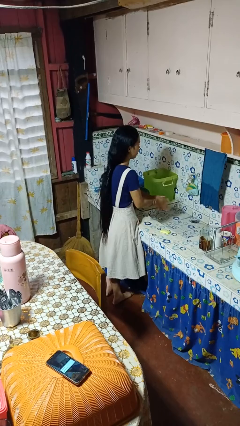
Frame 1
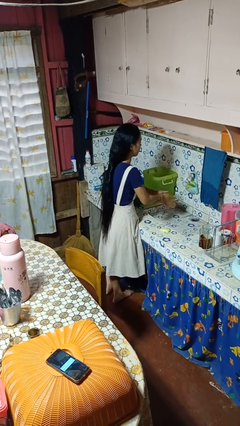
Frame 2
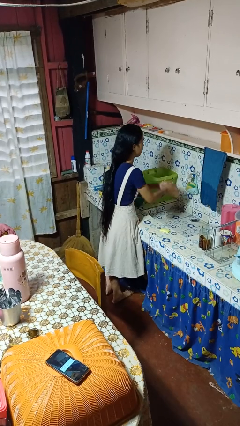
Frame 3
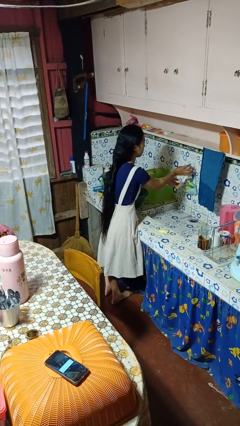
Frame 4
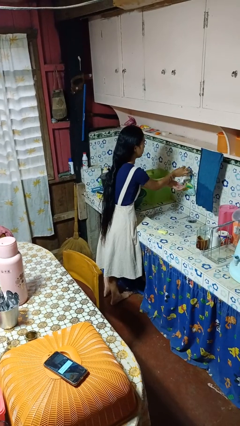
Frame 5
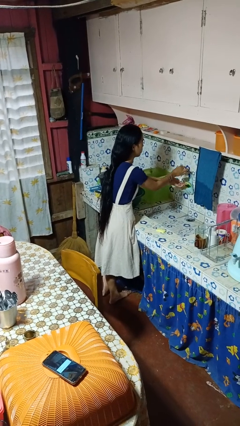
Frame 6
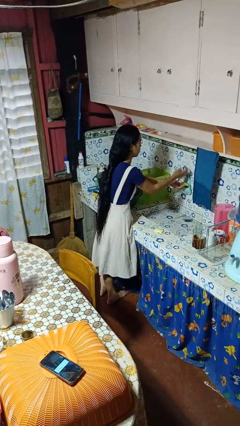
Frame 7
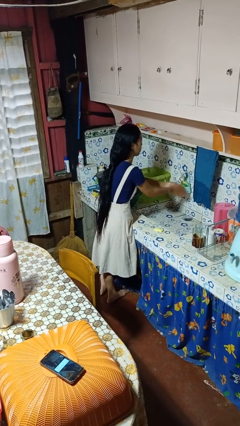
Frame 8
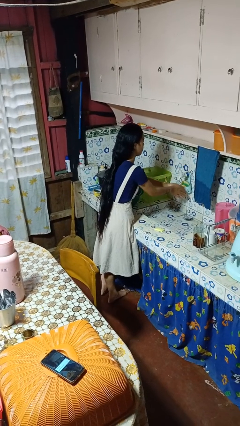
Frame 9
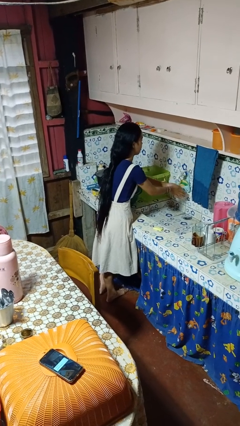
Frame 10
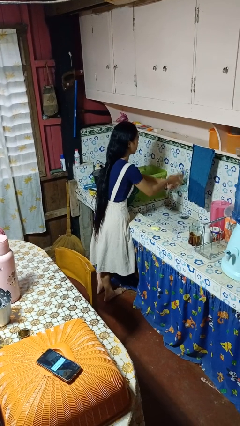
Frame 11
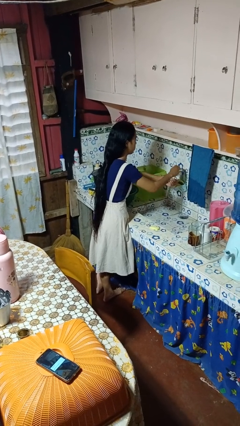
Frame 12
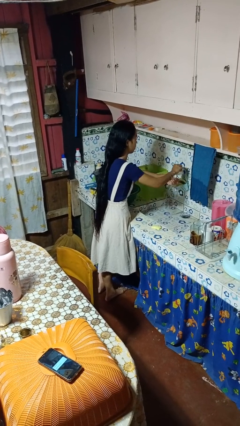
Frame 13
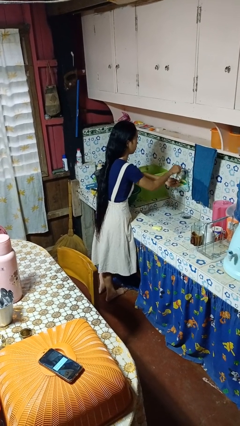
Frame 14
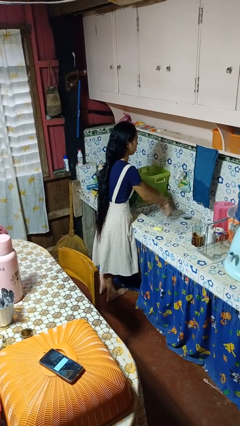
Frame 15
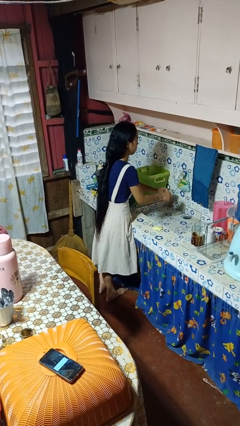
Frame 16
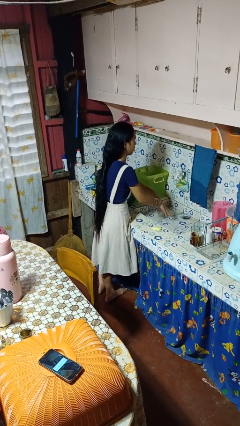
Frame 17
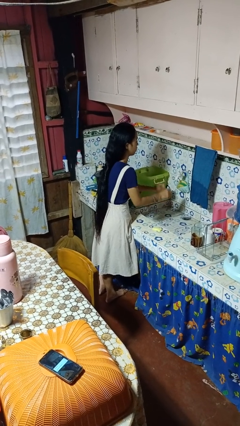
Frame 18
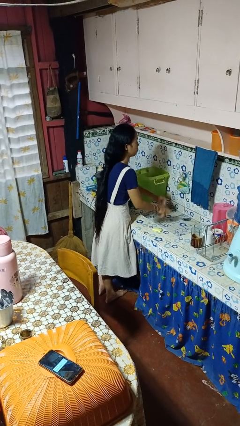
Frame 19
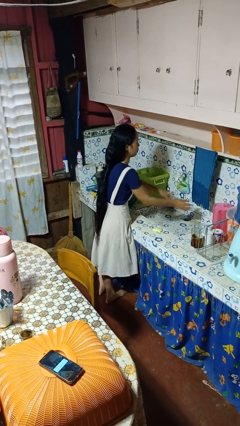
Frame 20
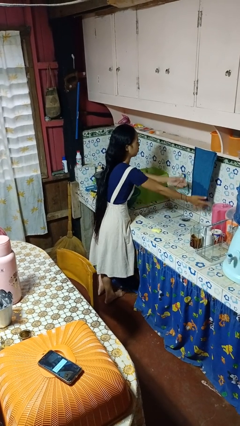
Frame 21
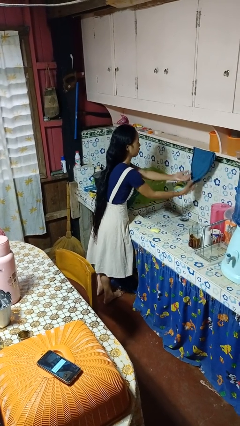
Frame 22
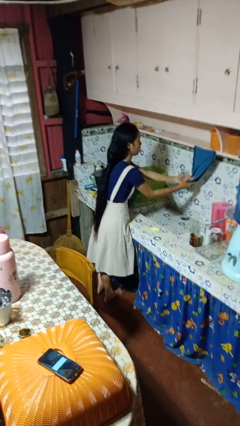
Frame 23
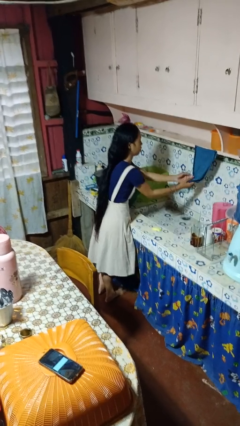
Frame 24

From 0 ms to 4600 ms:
person washes hands

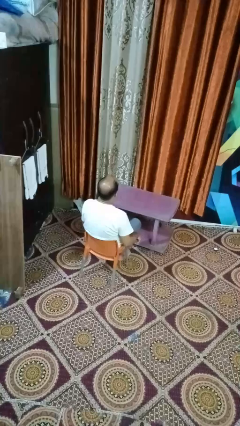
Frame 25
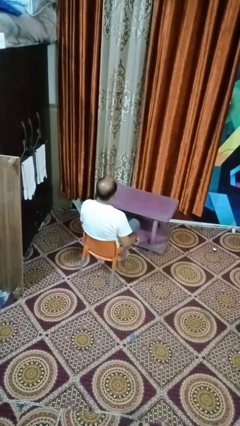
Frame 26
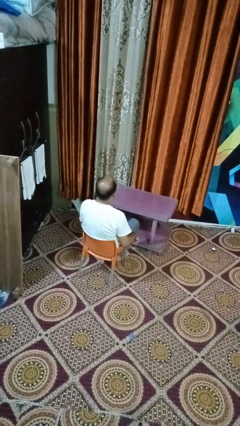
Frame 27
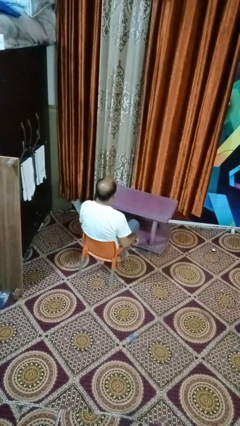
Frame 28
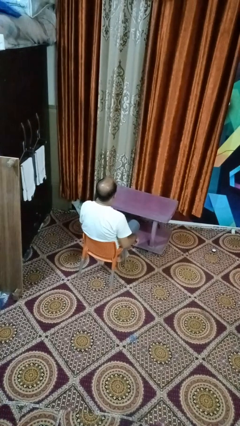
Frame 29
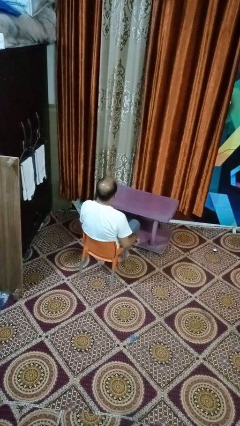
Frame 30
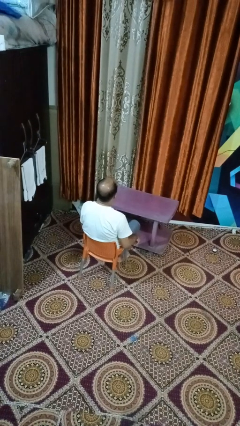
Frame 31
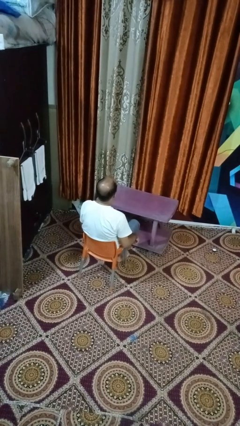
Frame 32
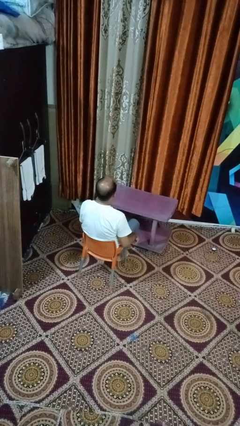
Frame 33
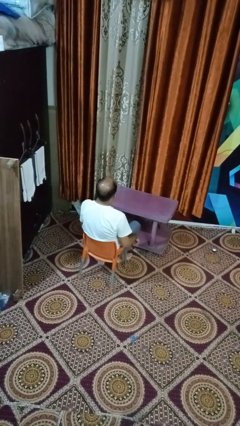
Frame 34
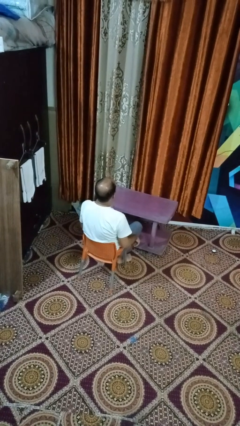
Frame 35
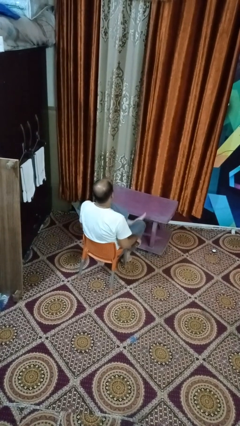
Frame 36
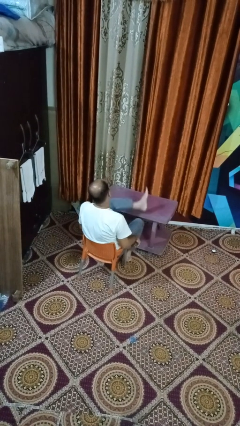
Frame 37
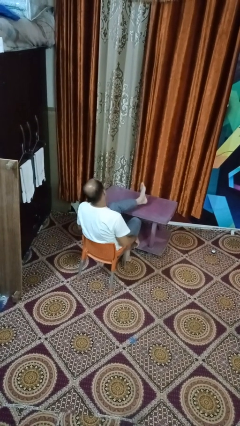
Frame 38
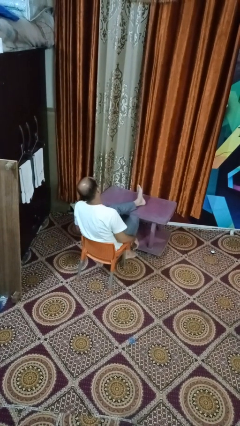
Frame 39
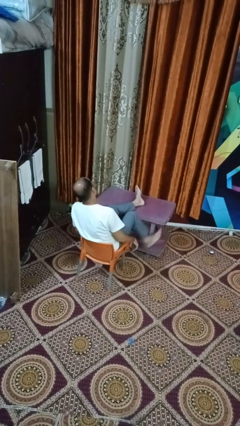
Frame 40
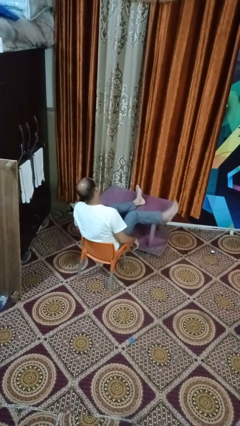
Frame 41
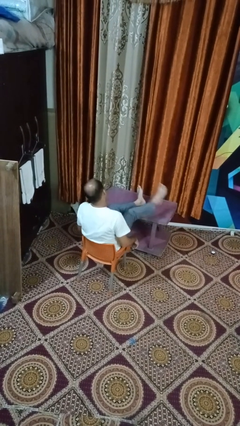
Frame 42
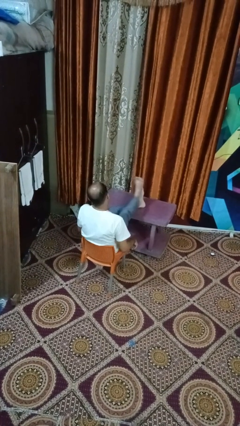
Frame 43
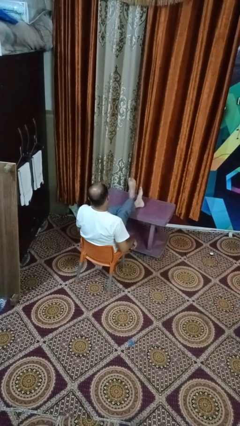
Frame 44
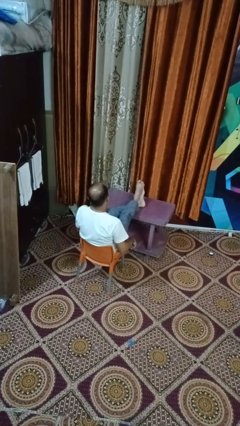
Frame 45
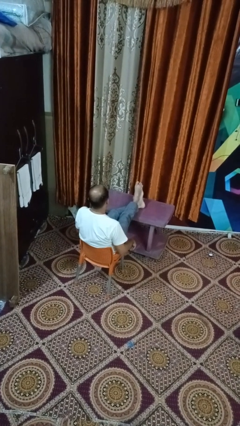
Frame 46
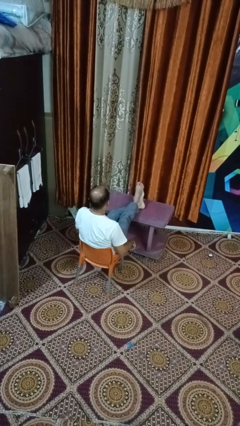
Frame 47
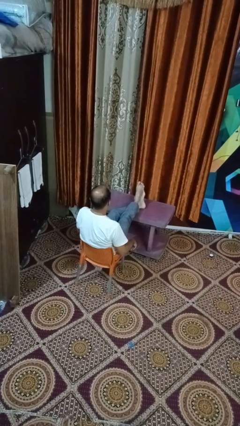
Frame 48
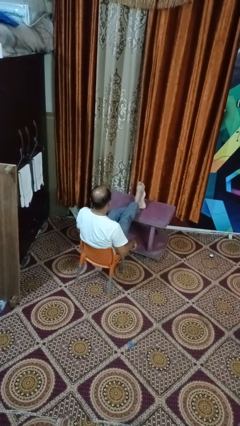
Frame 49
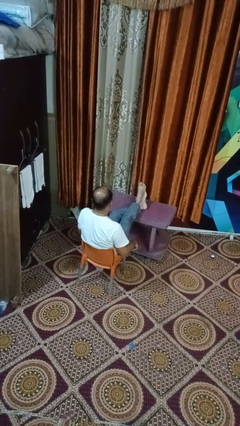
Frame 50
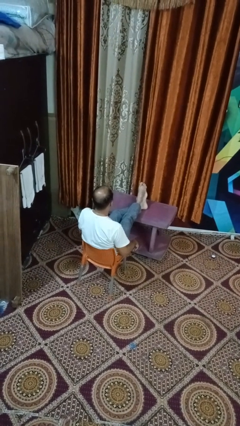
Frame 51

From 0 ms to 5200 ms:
person puts feet up

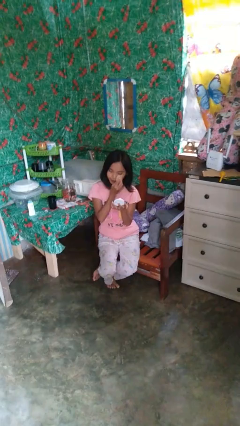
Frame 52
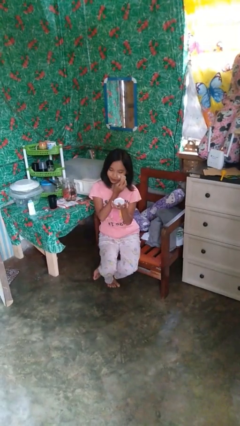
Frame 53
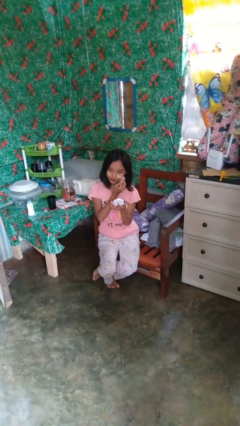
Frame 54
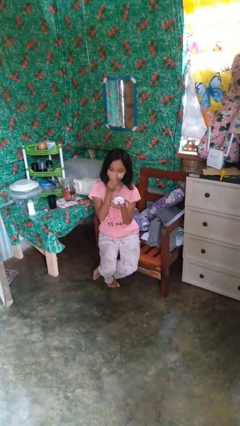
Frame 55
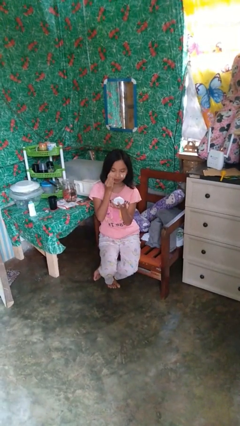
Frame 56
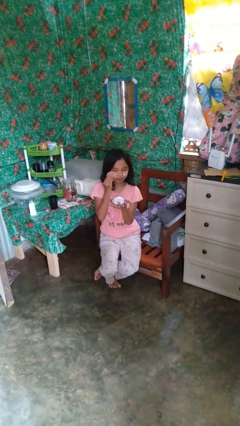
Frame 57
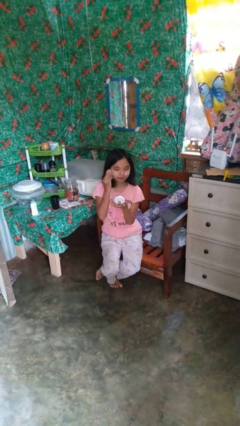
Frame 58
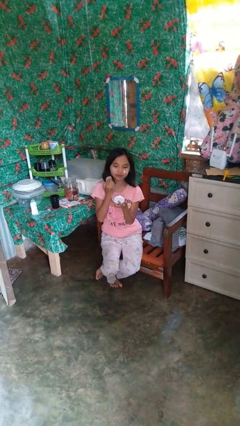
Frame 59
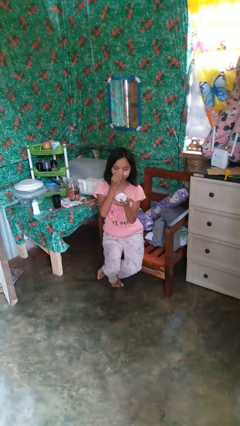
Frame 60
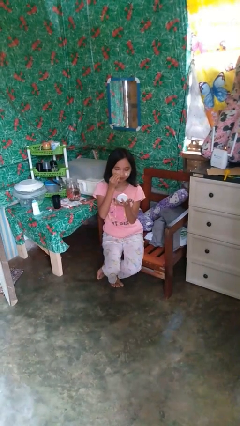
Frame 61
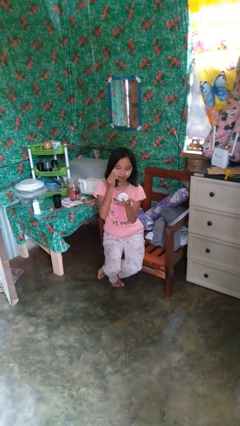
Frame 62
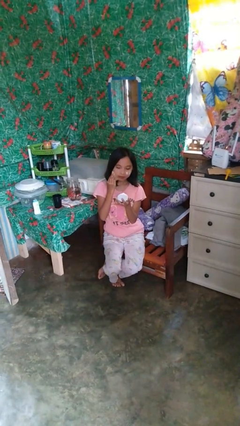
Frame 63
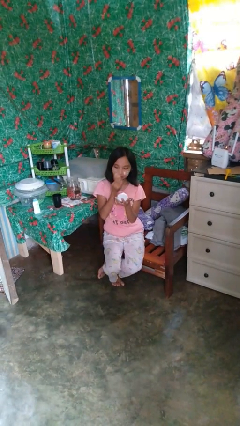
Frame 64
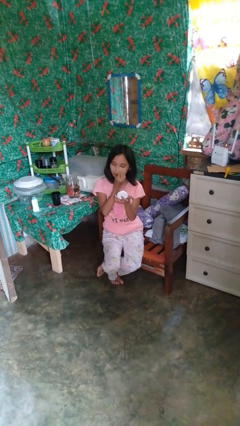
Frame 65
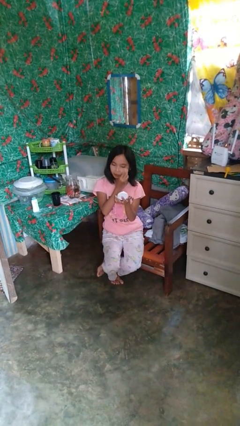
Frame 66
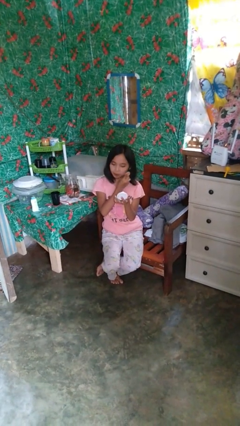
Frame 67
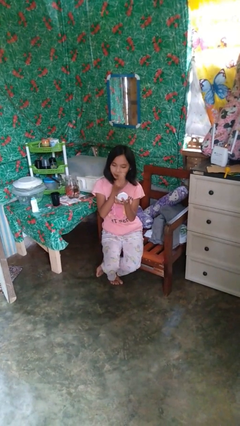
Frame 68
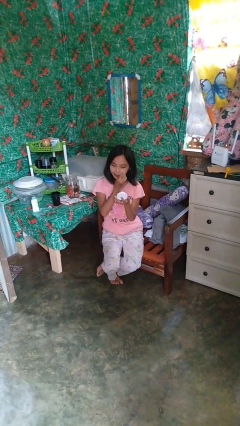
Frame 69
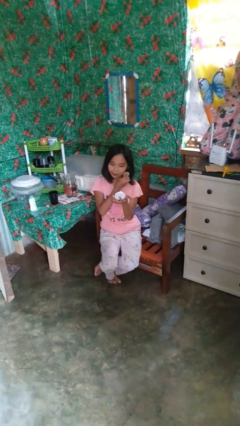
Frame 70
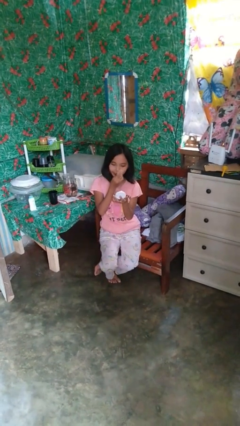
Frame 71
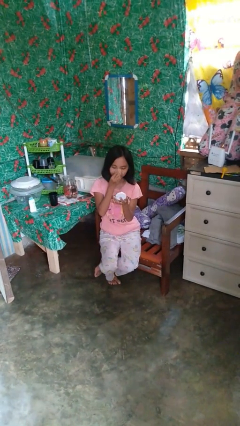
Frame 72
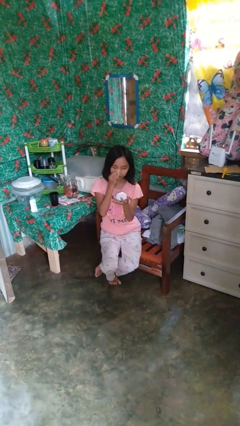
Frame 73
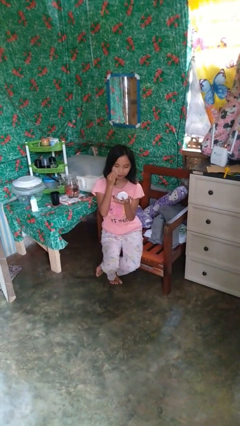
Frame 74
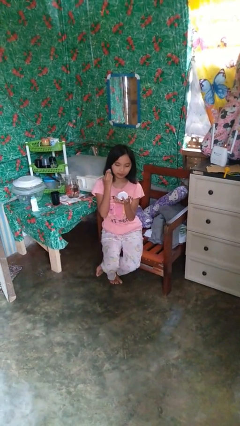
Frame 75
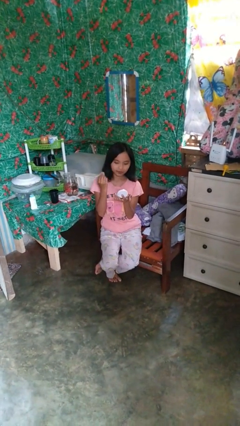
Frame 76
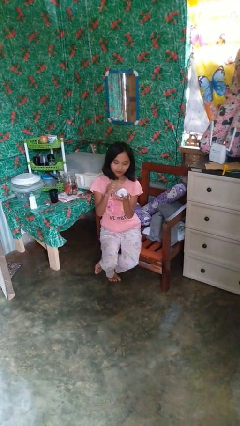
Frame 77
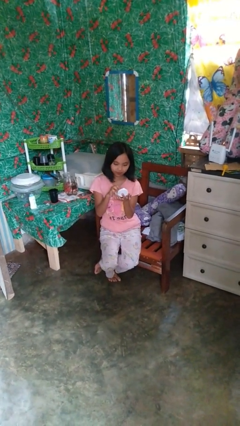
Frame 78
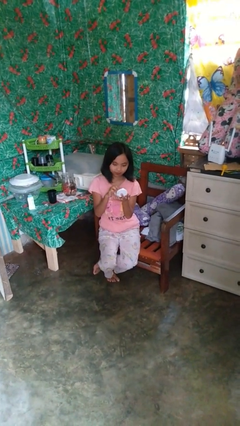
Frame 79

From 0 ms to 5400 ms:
person applies foundation makeup

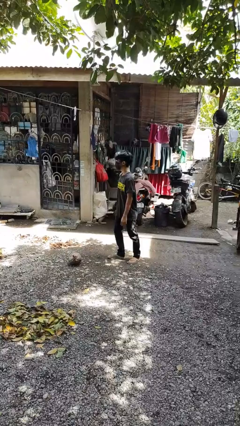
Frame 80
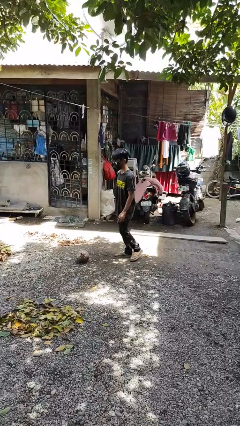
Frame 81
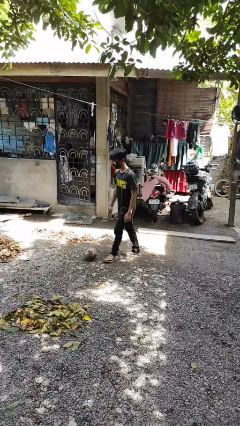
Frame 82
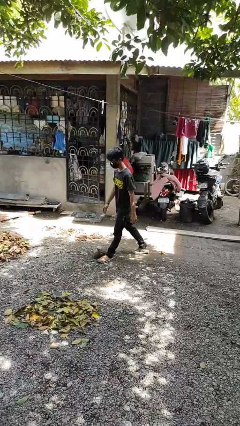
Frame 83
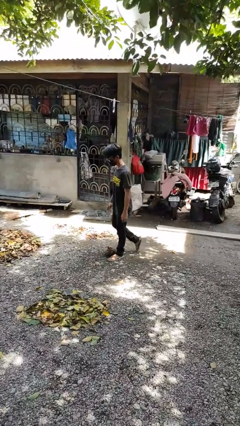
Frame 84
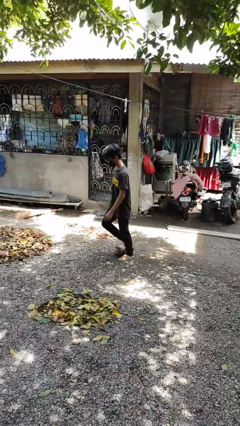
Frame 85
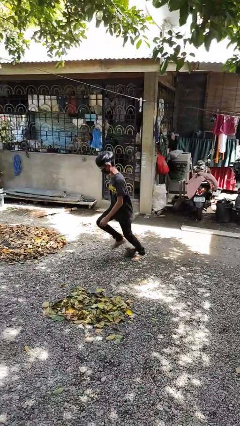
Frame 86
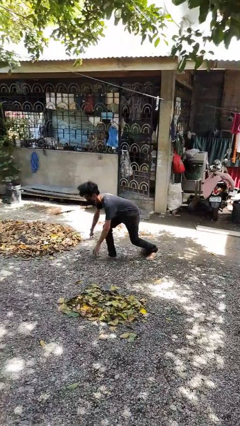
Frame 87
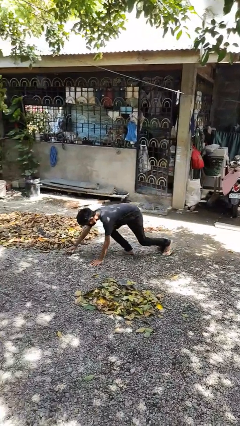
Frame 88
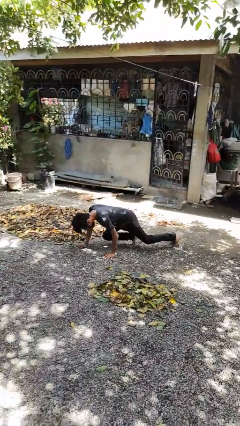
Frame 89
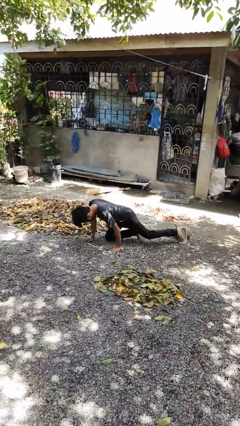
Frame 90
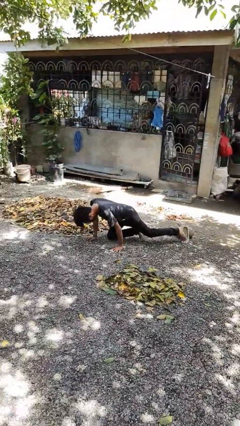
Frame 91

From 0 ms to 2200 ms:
person trips on object on floor

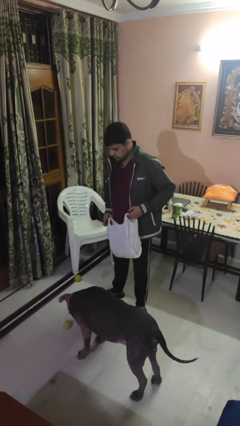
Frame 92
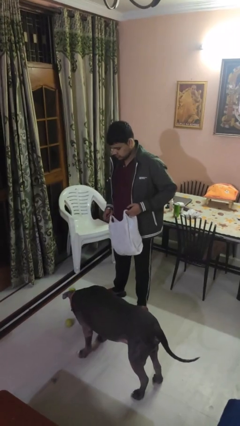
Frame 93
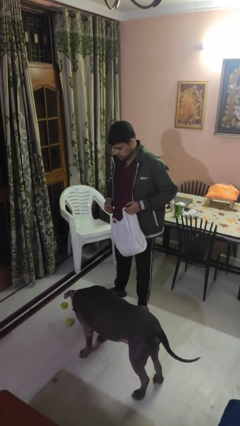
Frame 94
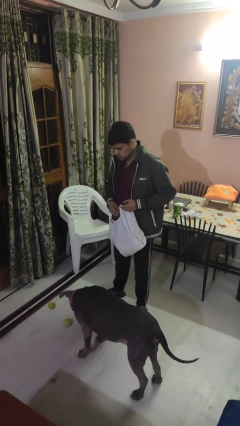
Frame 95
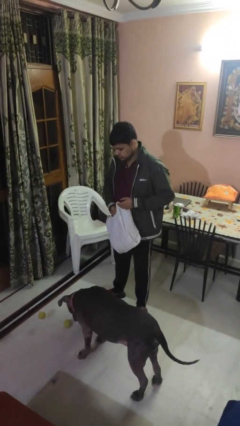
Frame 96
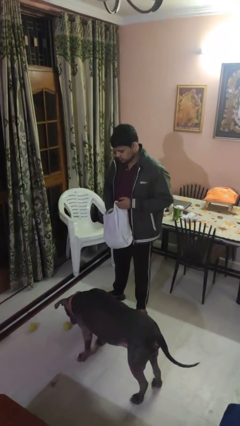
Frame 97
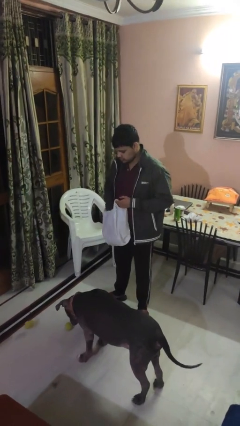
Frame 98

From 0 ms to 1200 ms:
person throws object to dog
